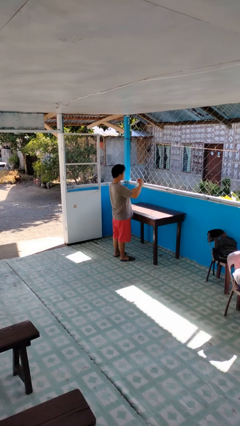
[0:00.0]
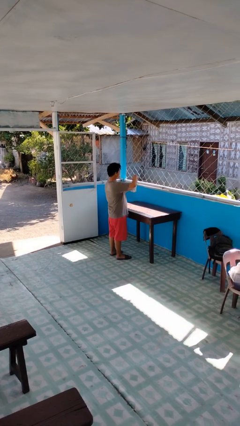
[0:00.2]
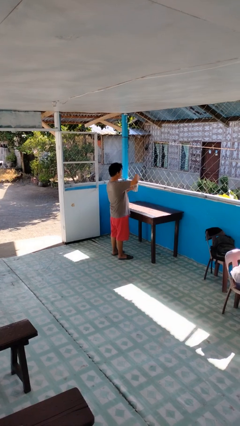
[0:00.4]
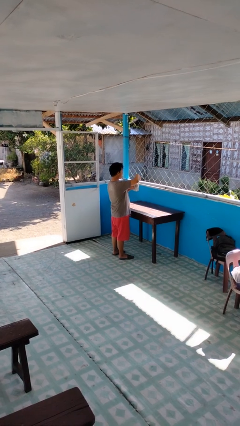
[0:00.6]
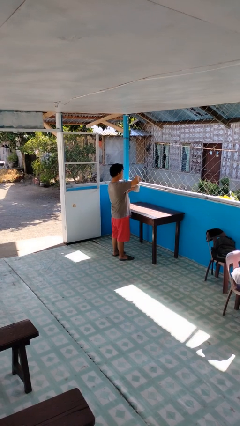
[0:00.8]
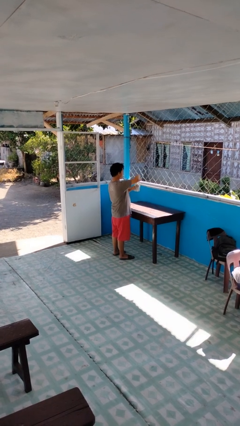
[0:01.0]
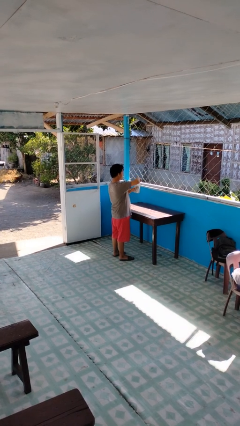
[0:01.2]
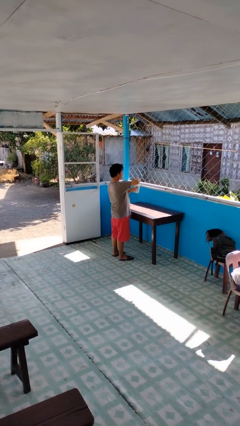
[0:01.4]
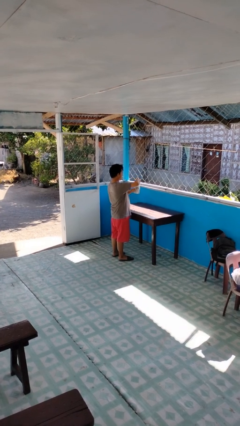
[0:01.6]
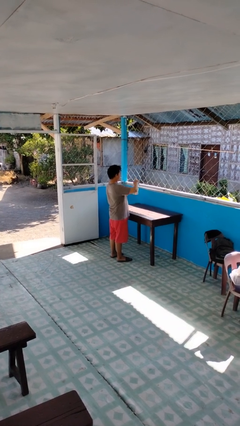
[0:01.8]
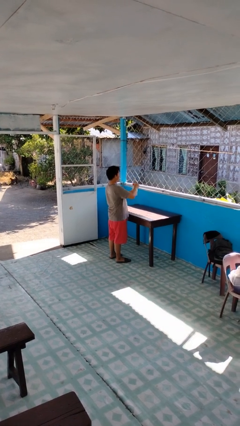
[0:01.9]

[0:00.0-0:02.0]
person closes jar

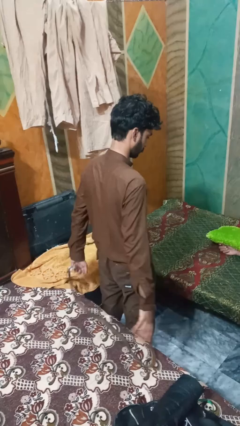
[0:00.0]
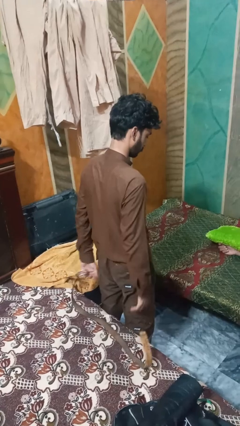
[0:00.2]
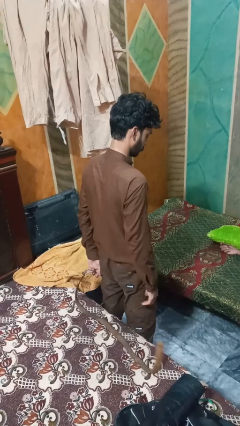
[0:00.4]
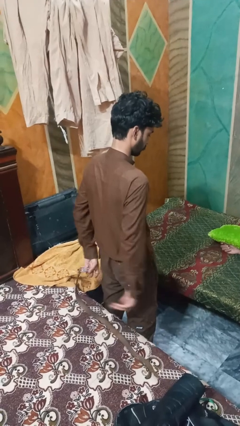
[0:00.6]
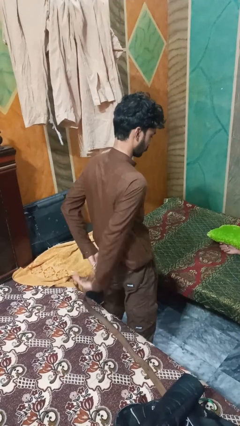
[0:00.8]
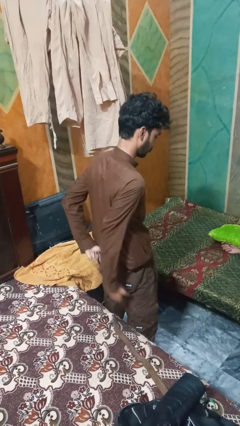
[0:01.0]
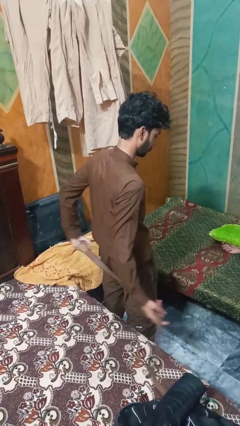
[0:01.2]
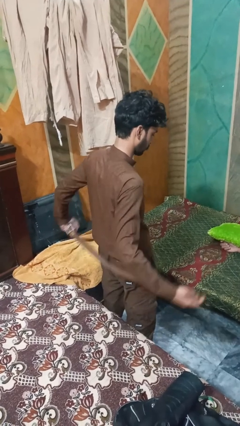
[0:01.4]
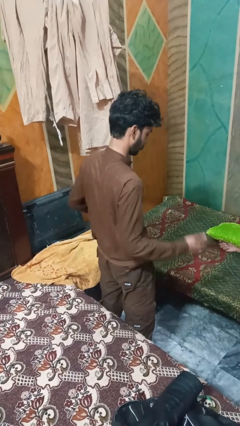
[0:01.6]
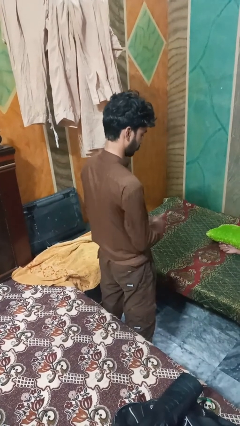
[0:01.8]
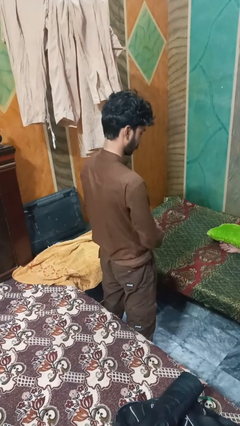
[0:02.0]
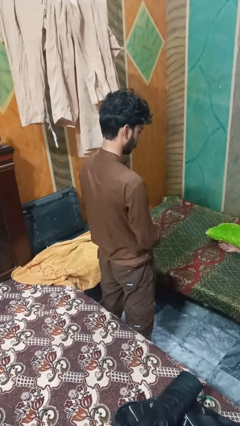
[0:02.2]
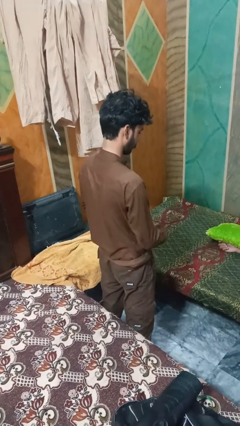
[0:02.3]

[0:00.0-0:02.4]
person puts on belt

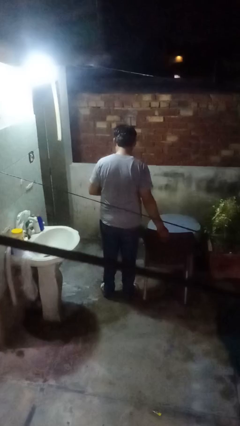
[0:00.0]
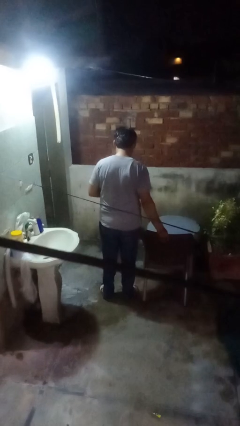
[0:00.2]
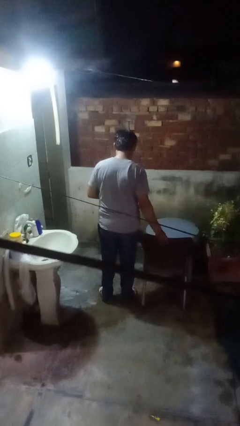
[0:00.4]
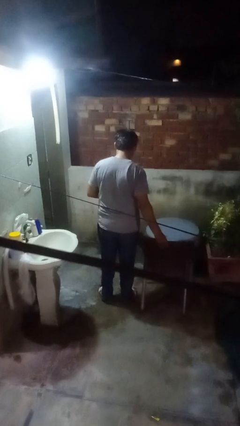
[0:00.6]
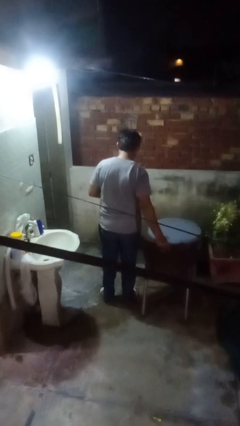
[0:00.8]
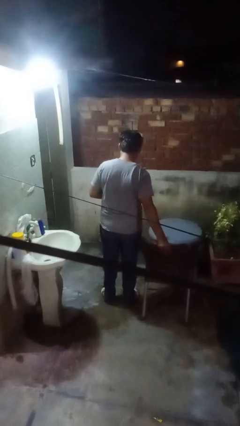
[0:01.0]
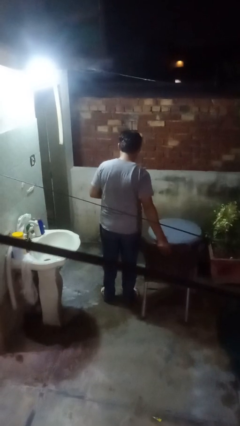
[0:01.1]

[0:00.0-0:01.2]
person pulls out chair

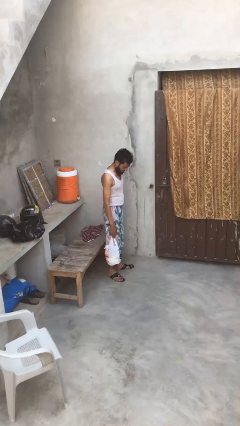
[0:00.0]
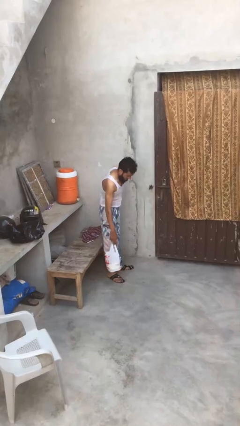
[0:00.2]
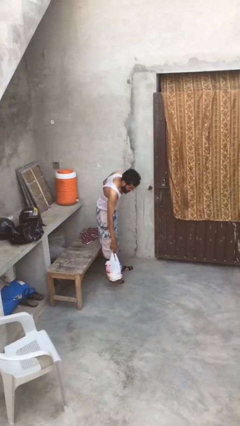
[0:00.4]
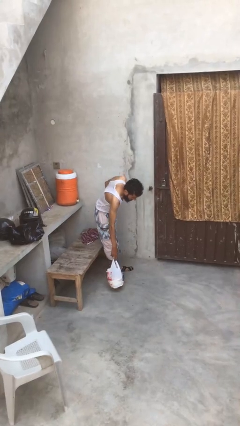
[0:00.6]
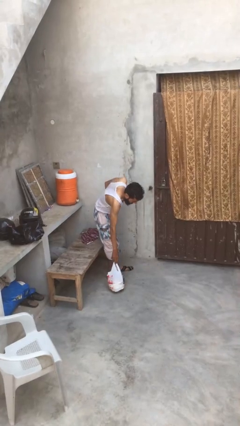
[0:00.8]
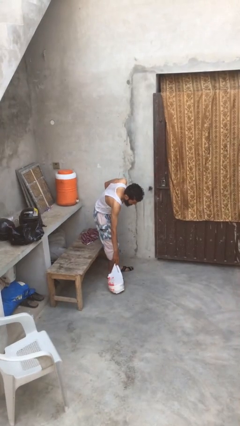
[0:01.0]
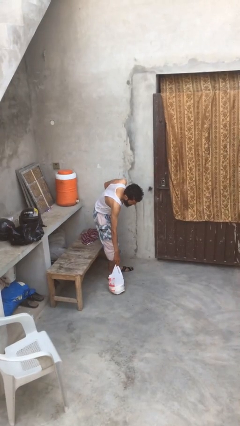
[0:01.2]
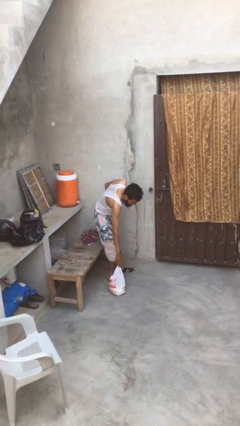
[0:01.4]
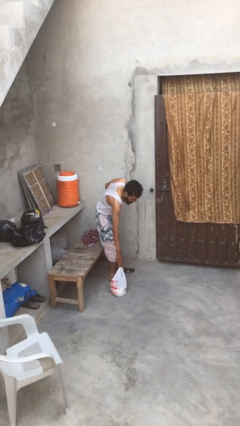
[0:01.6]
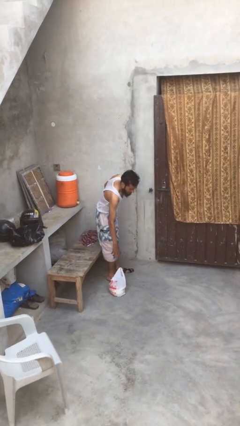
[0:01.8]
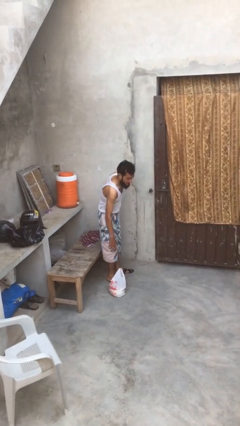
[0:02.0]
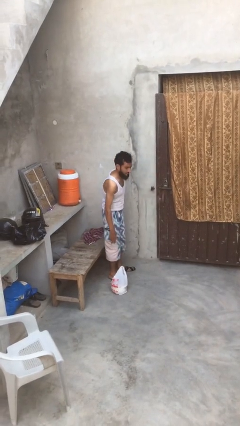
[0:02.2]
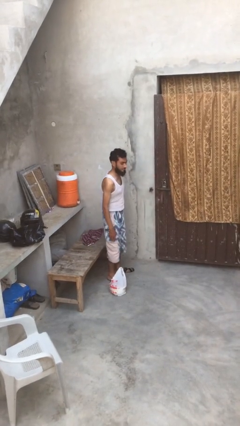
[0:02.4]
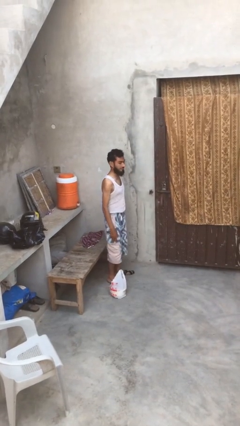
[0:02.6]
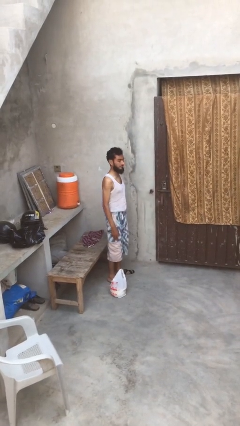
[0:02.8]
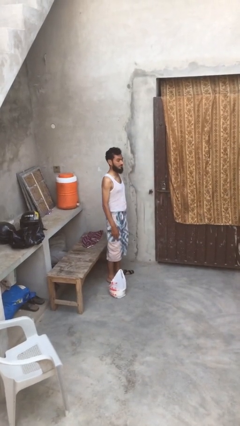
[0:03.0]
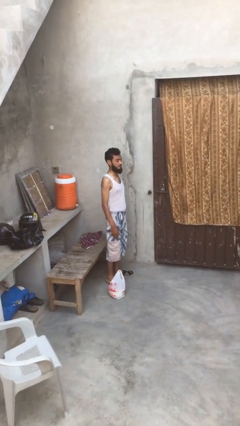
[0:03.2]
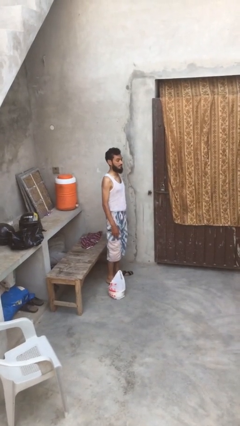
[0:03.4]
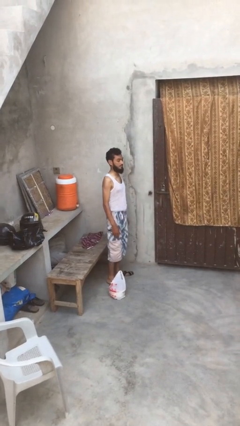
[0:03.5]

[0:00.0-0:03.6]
person puts down object on floor

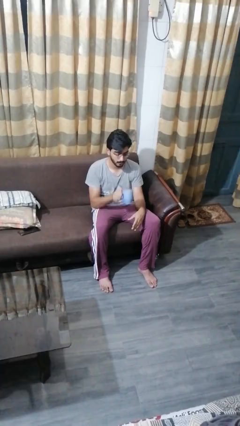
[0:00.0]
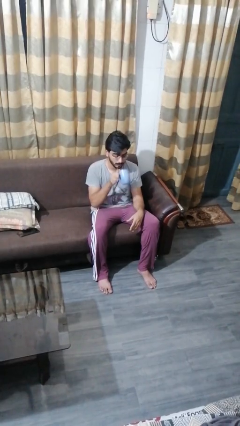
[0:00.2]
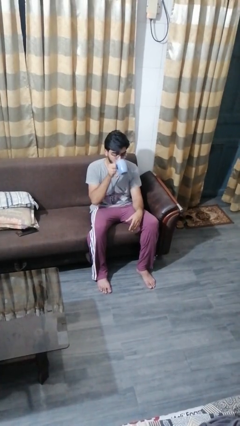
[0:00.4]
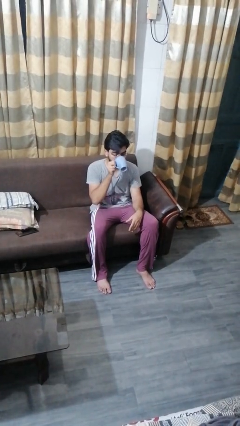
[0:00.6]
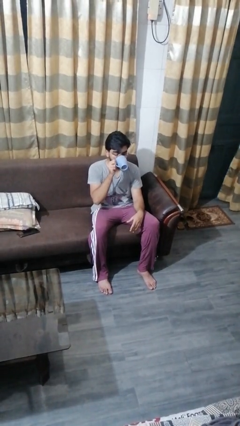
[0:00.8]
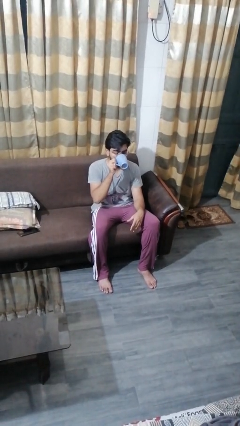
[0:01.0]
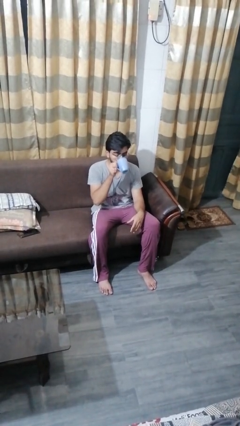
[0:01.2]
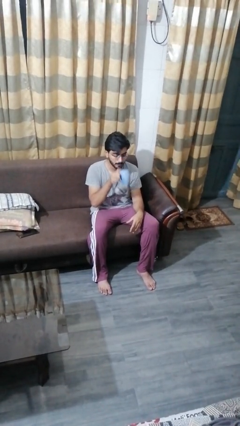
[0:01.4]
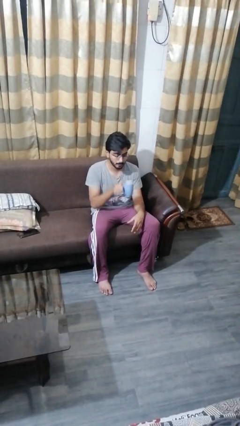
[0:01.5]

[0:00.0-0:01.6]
person drinks from mug

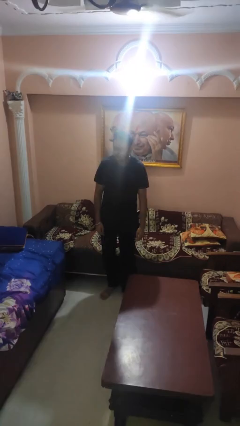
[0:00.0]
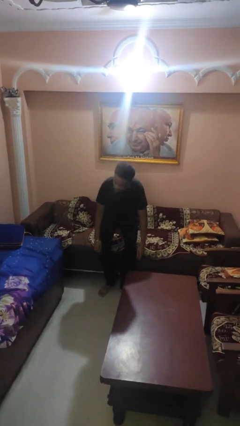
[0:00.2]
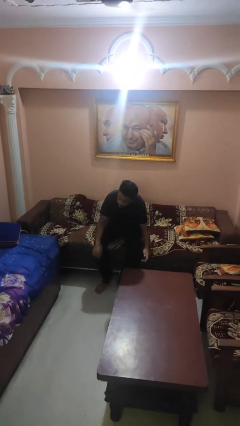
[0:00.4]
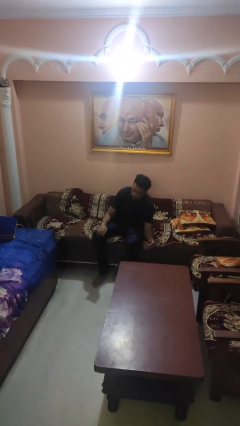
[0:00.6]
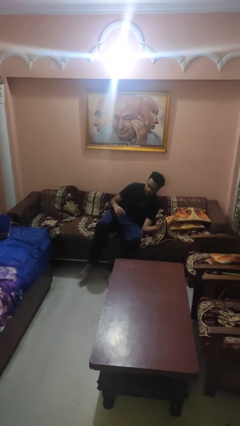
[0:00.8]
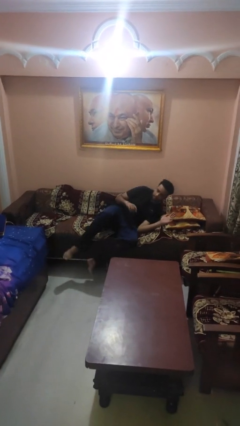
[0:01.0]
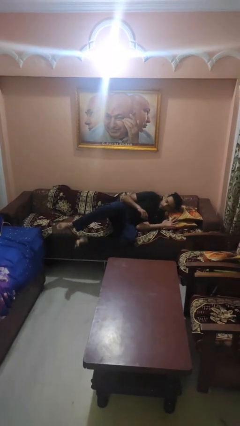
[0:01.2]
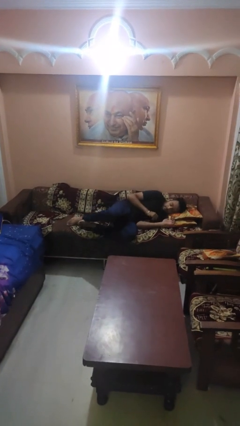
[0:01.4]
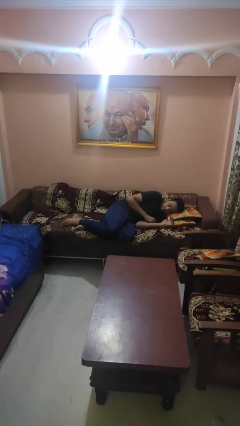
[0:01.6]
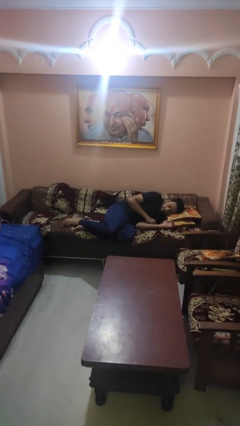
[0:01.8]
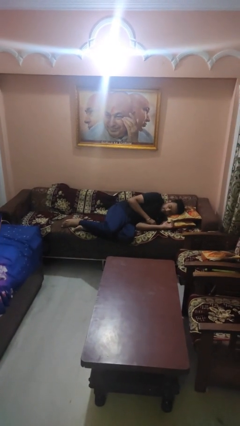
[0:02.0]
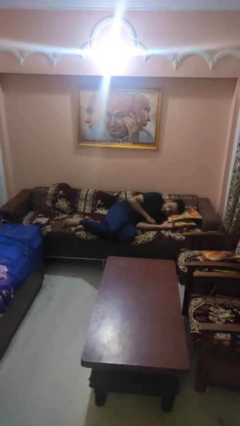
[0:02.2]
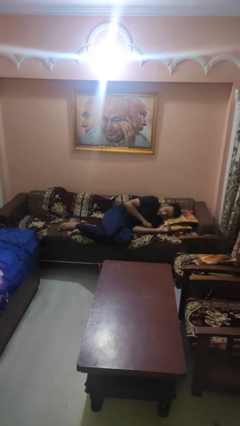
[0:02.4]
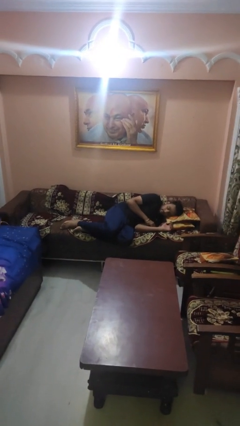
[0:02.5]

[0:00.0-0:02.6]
person lies down on couch

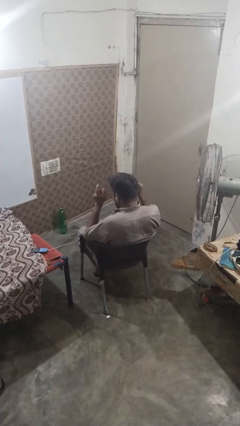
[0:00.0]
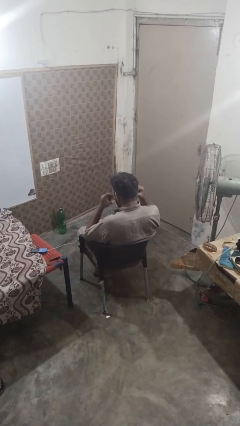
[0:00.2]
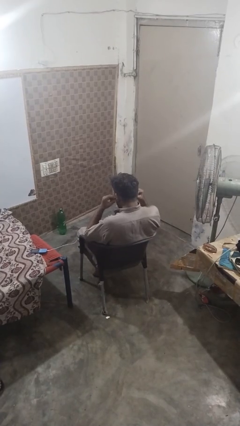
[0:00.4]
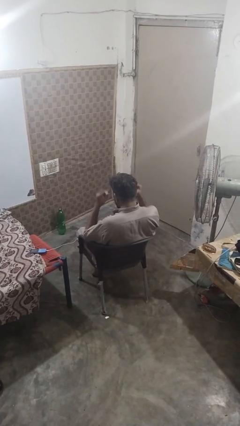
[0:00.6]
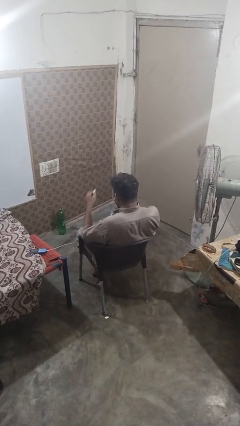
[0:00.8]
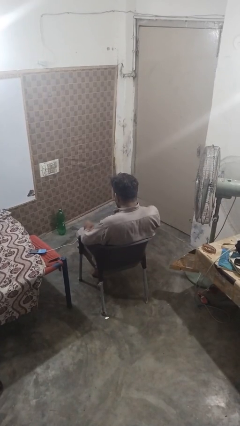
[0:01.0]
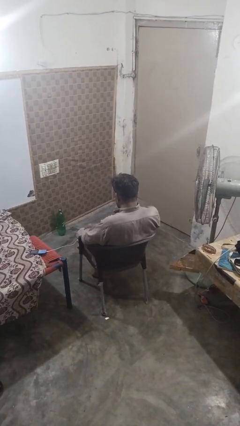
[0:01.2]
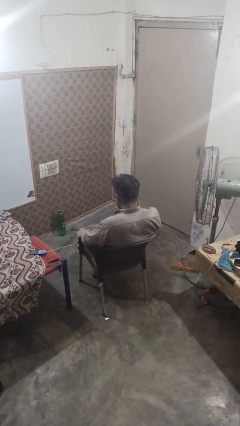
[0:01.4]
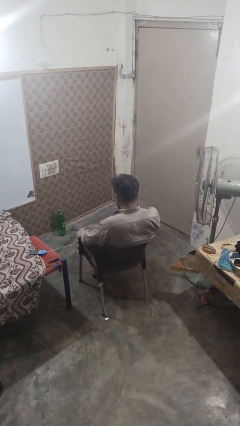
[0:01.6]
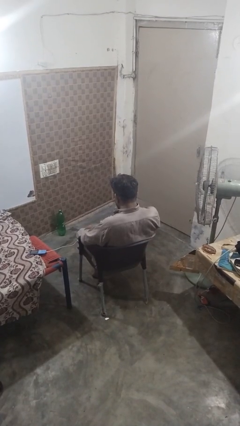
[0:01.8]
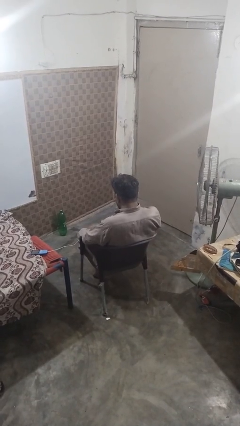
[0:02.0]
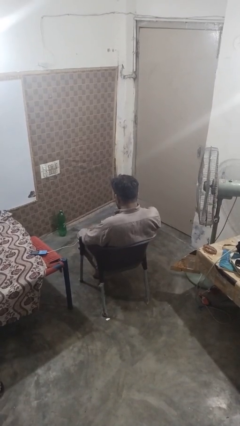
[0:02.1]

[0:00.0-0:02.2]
person takes off headphones

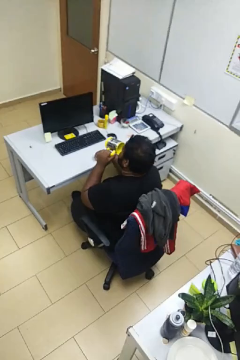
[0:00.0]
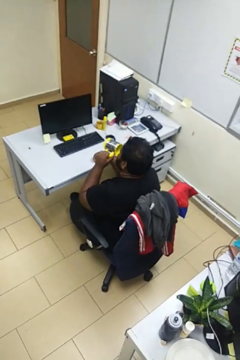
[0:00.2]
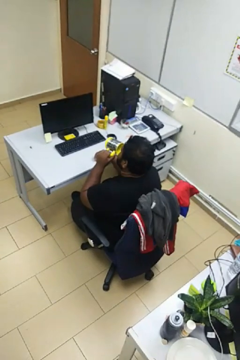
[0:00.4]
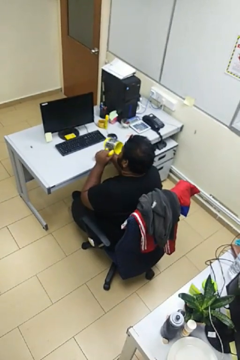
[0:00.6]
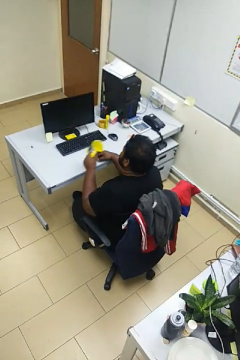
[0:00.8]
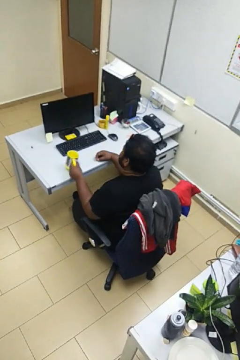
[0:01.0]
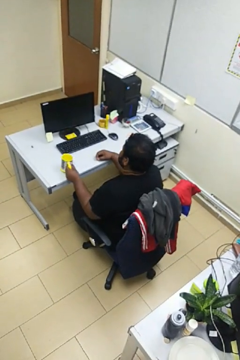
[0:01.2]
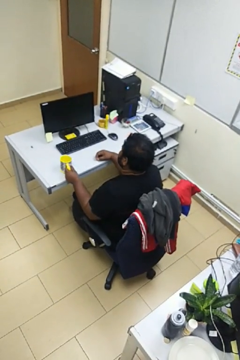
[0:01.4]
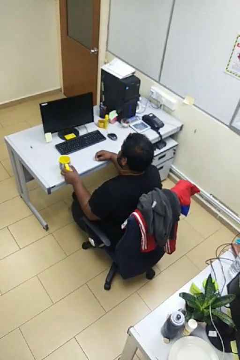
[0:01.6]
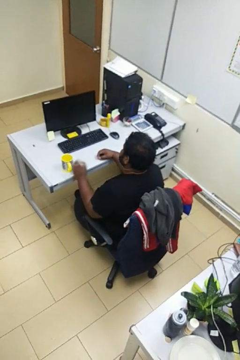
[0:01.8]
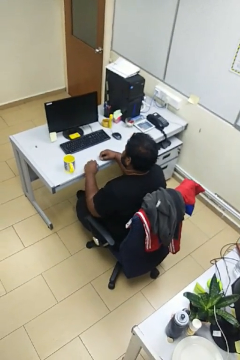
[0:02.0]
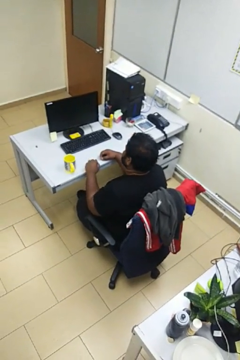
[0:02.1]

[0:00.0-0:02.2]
person puts down object on table
